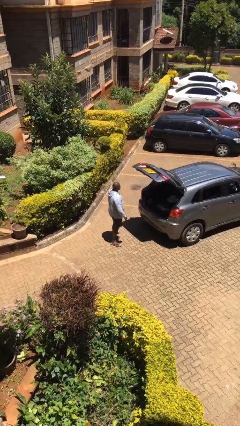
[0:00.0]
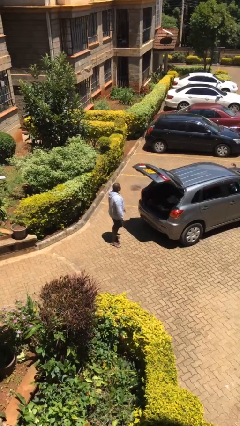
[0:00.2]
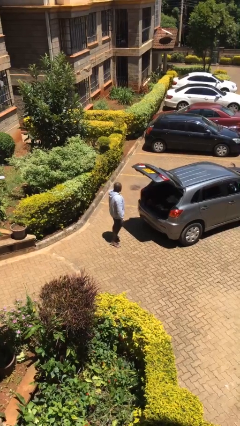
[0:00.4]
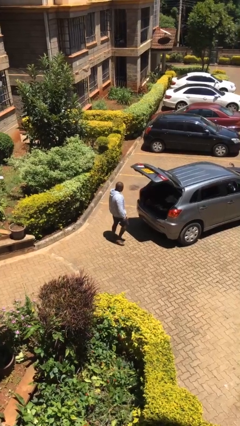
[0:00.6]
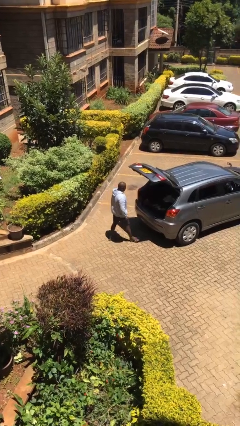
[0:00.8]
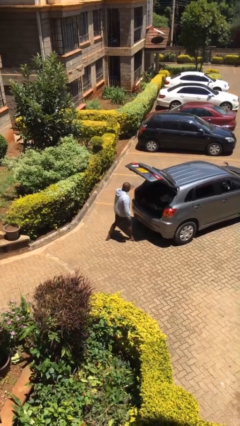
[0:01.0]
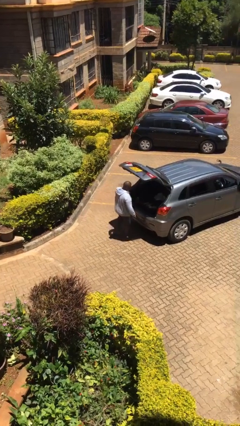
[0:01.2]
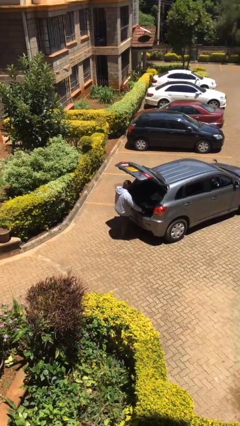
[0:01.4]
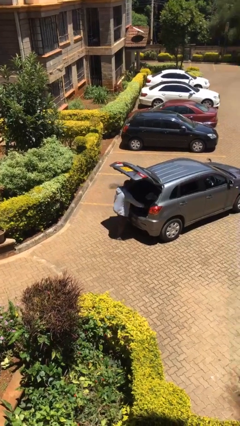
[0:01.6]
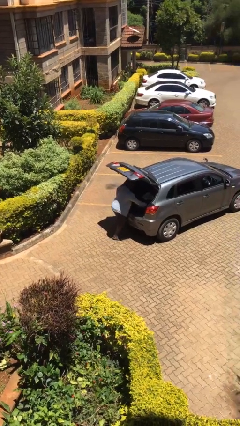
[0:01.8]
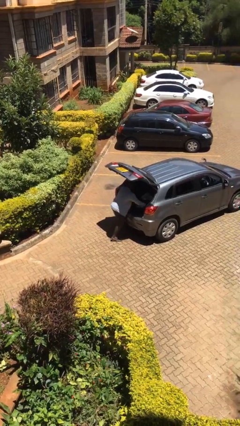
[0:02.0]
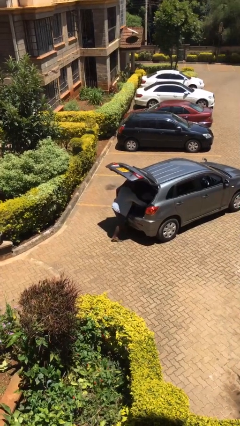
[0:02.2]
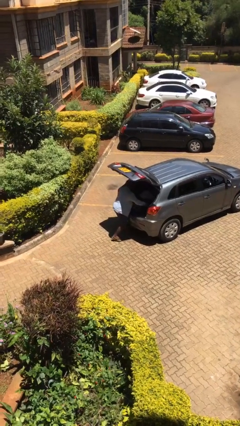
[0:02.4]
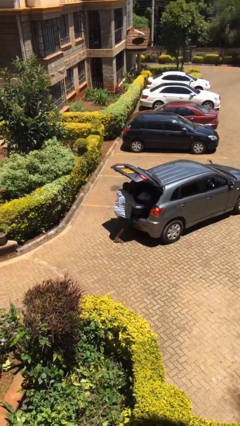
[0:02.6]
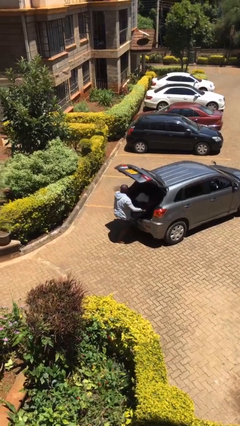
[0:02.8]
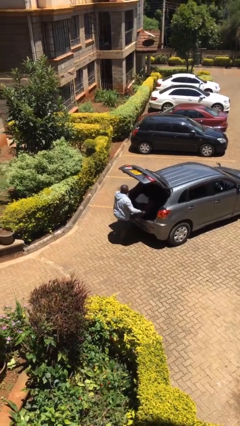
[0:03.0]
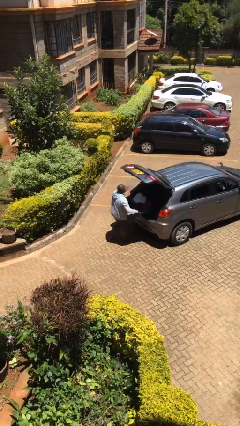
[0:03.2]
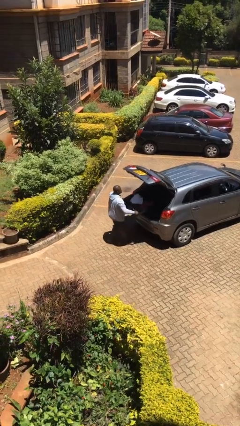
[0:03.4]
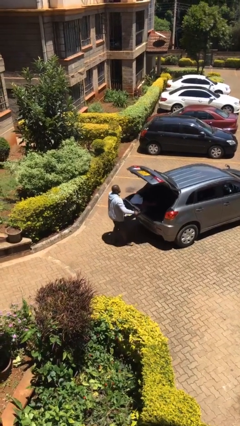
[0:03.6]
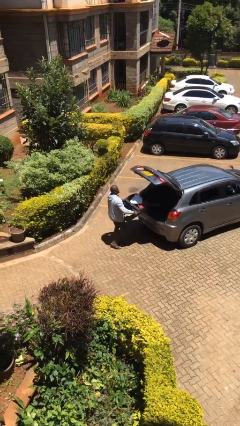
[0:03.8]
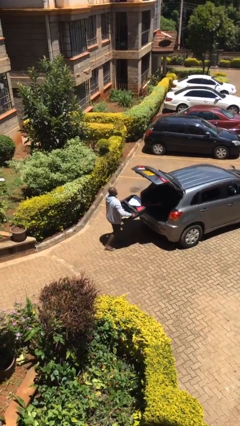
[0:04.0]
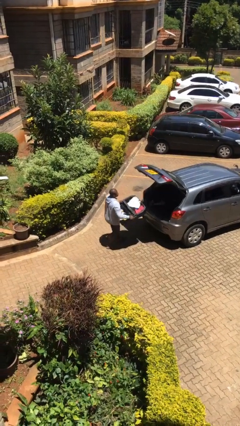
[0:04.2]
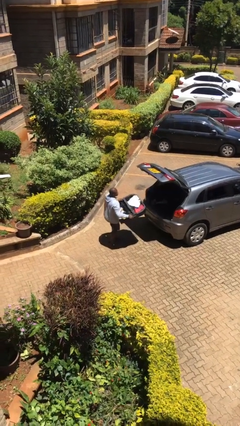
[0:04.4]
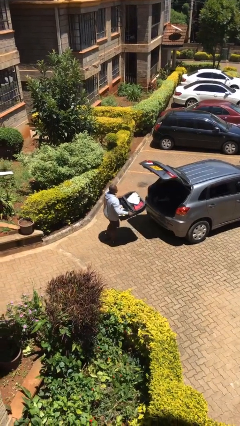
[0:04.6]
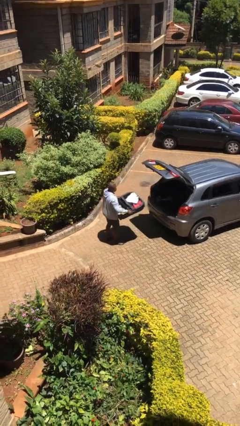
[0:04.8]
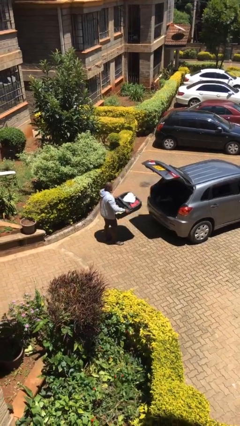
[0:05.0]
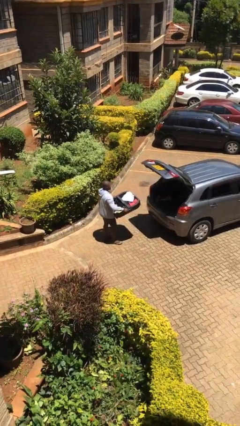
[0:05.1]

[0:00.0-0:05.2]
person unloads car

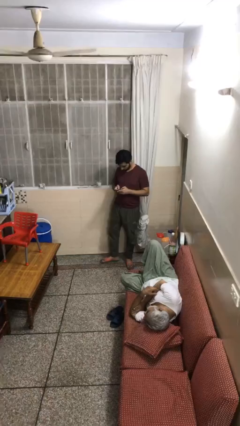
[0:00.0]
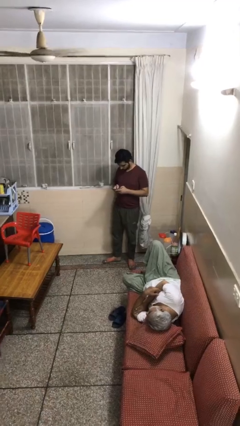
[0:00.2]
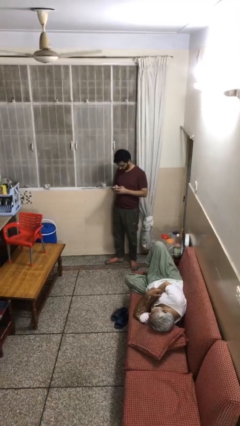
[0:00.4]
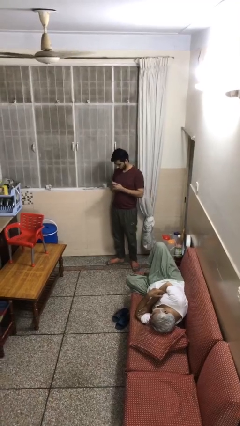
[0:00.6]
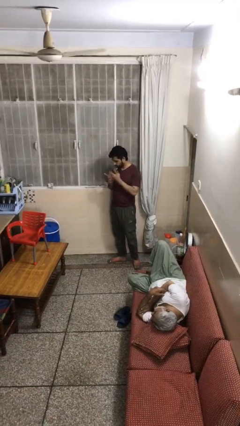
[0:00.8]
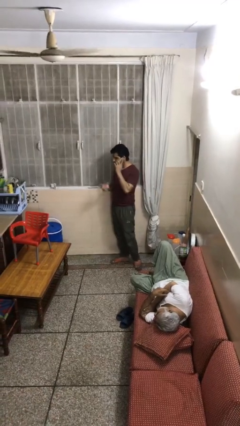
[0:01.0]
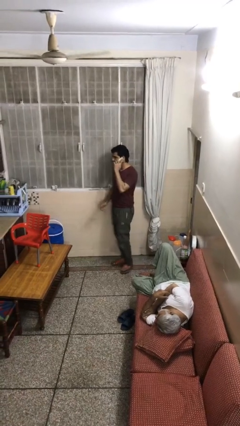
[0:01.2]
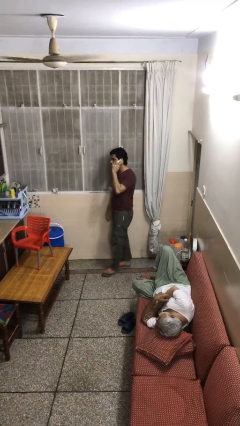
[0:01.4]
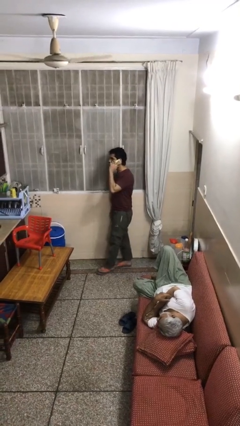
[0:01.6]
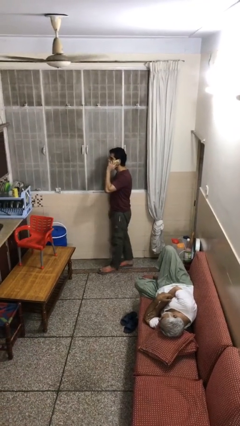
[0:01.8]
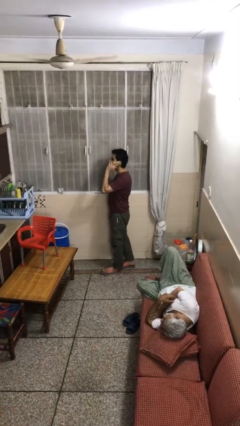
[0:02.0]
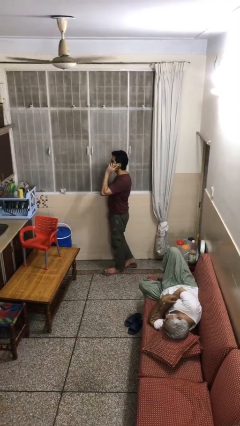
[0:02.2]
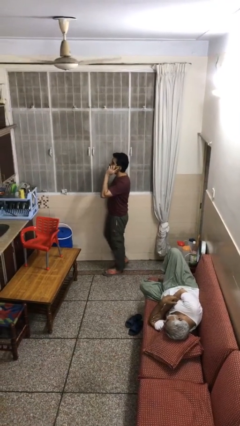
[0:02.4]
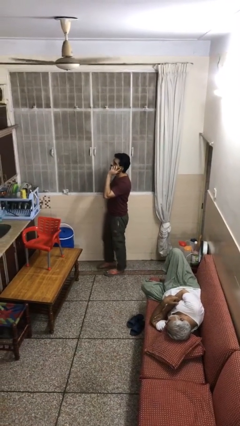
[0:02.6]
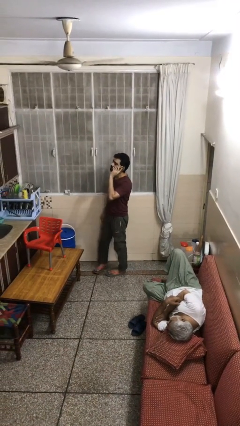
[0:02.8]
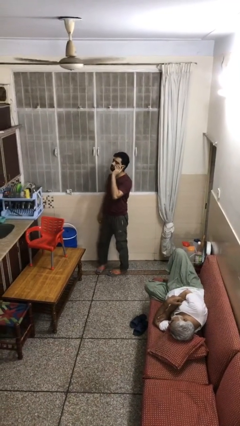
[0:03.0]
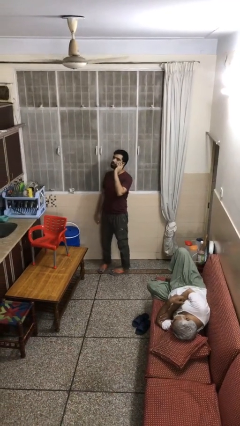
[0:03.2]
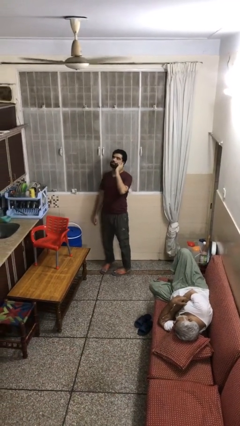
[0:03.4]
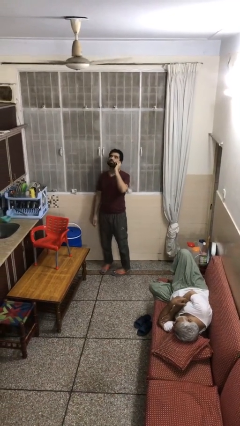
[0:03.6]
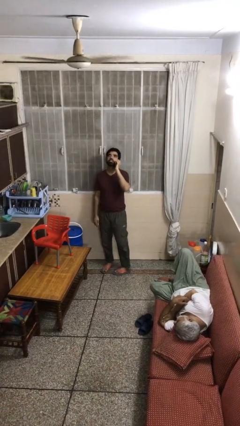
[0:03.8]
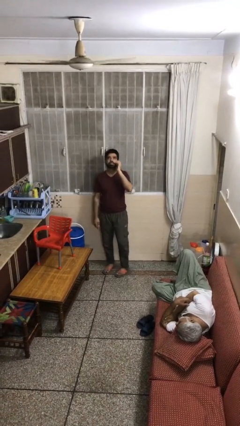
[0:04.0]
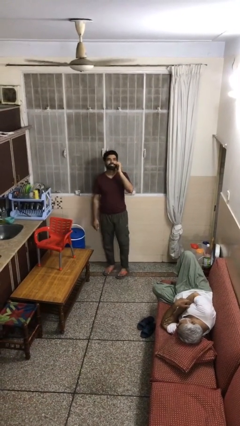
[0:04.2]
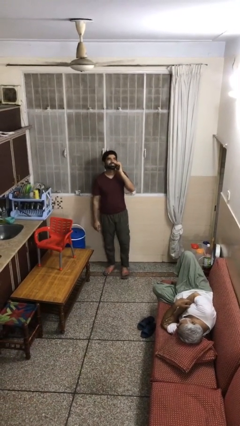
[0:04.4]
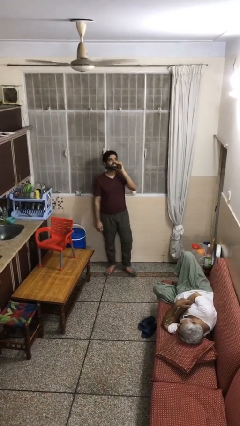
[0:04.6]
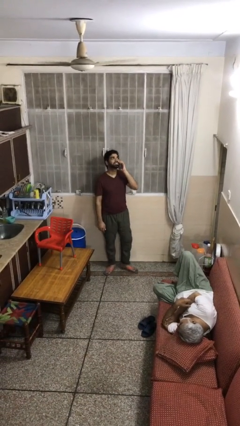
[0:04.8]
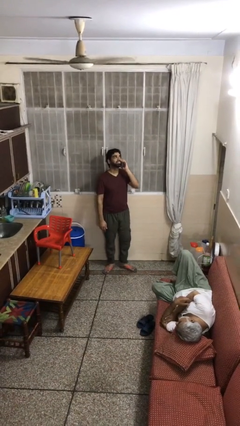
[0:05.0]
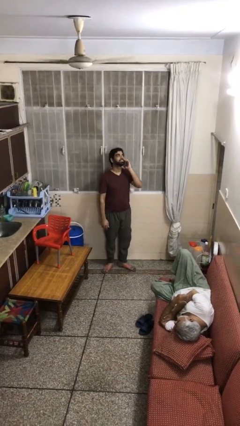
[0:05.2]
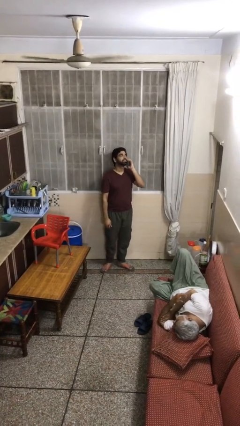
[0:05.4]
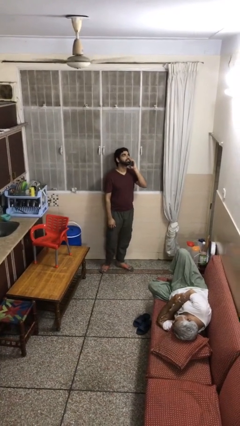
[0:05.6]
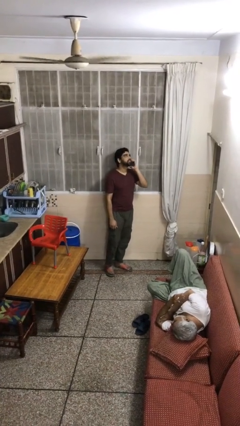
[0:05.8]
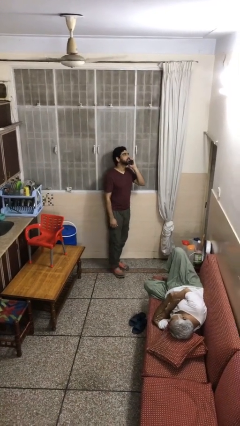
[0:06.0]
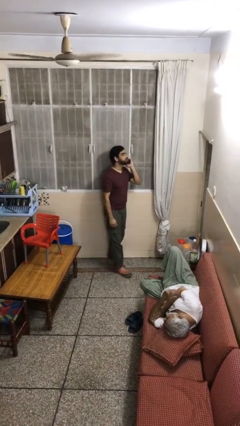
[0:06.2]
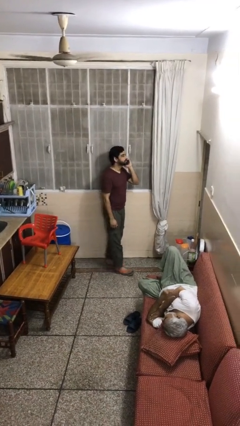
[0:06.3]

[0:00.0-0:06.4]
person talks on phone

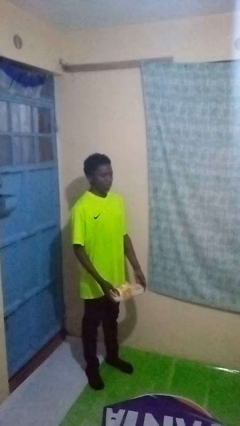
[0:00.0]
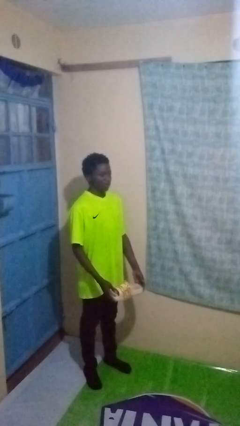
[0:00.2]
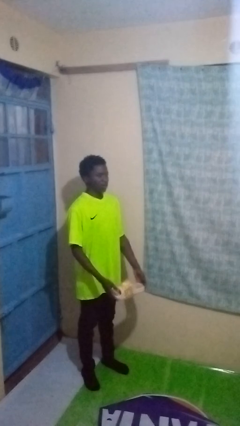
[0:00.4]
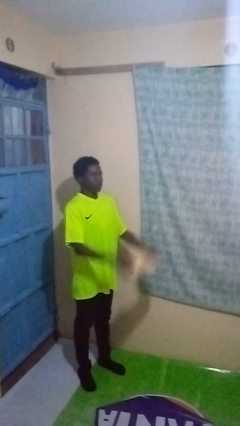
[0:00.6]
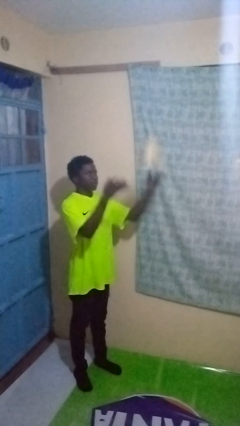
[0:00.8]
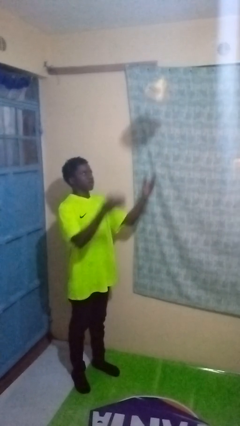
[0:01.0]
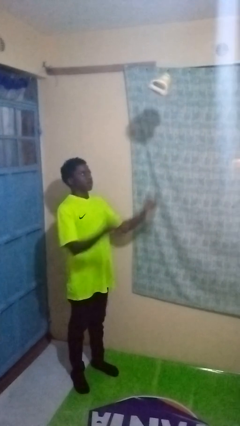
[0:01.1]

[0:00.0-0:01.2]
person throws object into air

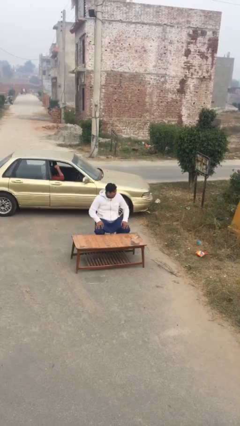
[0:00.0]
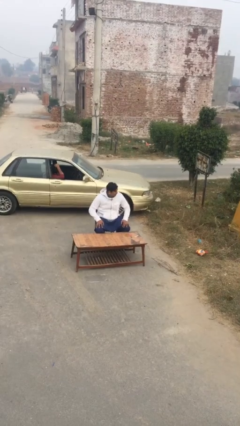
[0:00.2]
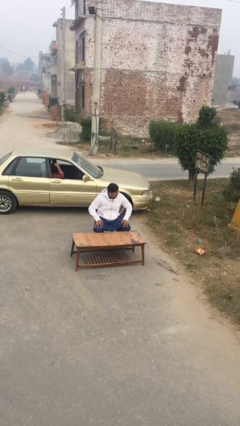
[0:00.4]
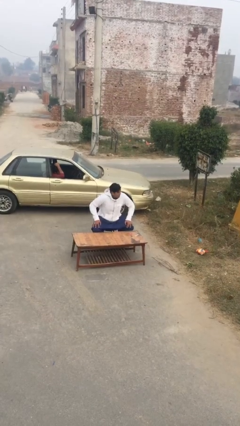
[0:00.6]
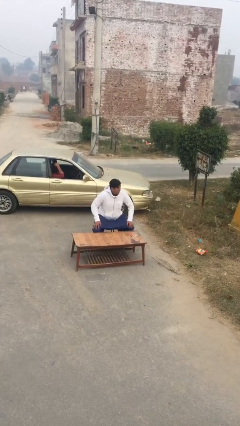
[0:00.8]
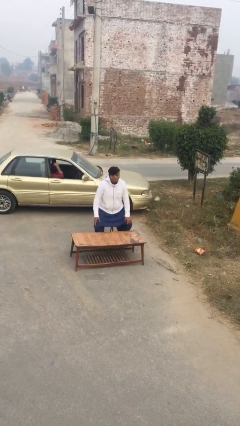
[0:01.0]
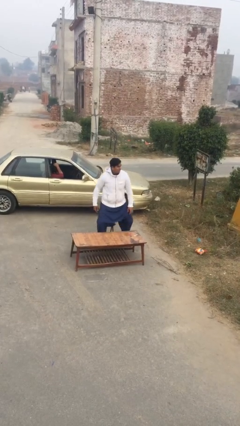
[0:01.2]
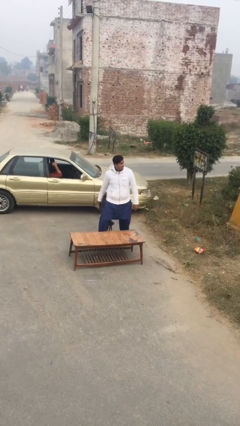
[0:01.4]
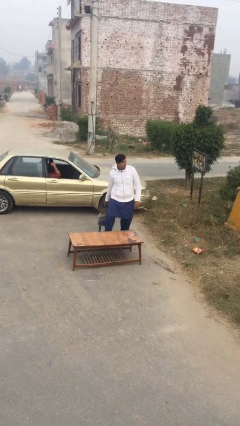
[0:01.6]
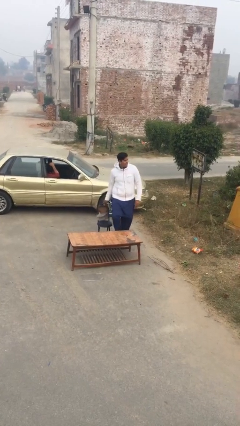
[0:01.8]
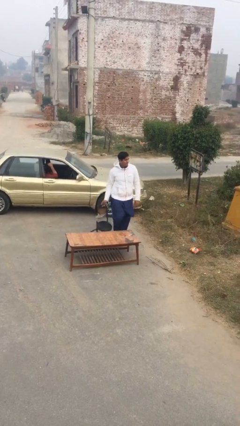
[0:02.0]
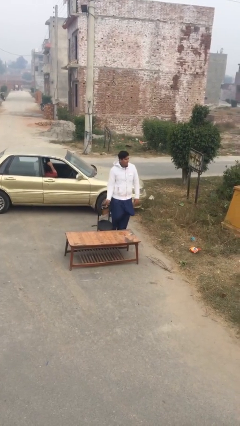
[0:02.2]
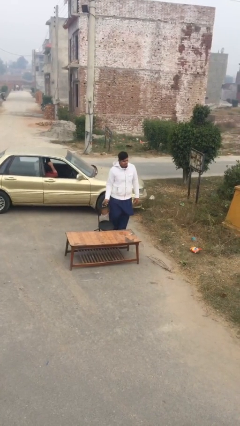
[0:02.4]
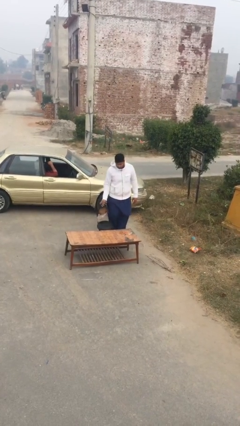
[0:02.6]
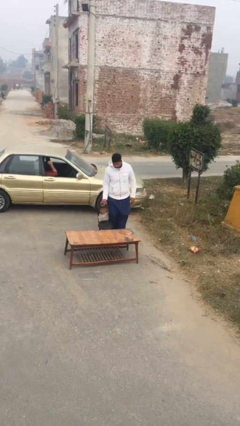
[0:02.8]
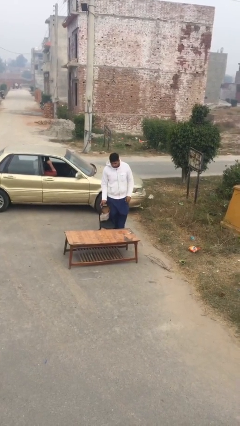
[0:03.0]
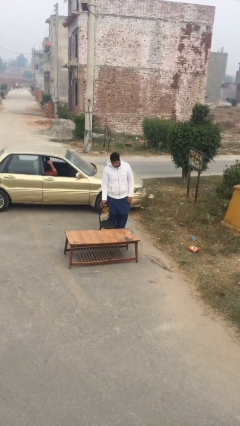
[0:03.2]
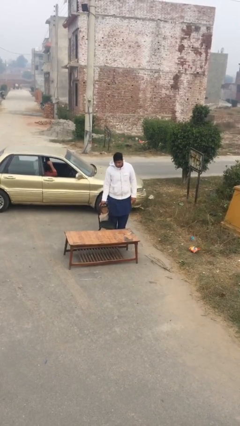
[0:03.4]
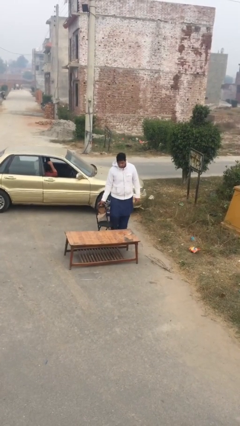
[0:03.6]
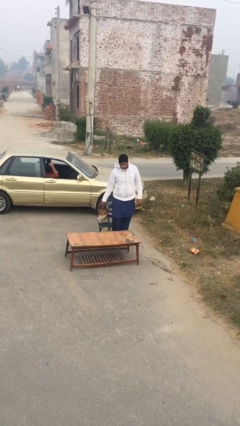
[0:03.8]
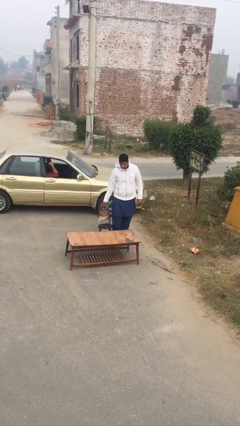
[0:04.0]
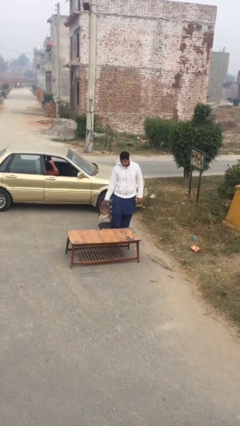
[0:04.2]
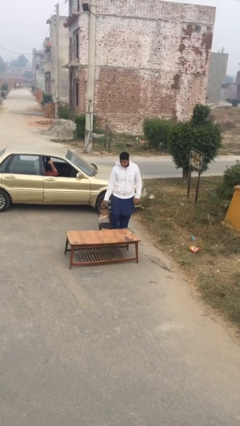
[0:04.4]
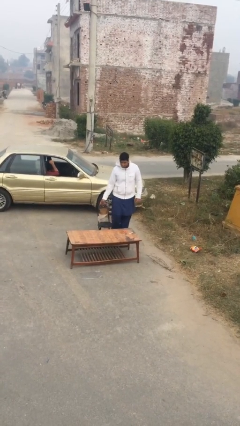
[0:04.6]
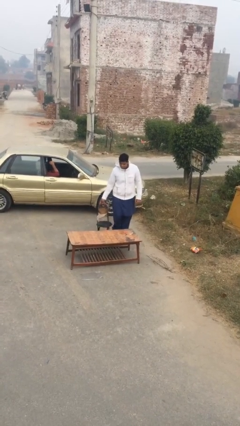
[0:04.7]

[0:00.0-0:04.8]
person stands up
